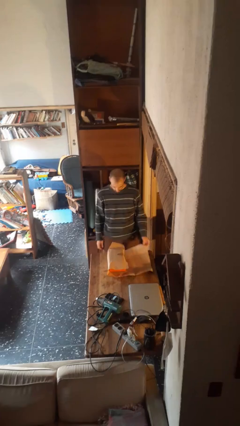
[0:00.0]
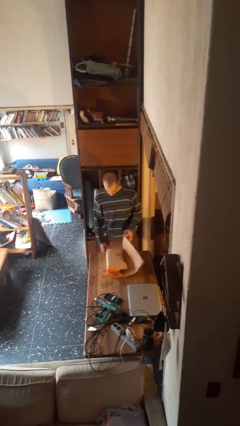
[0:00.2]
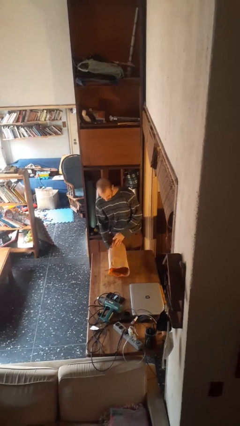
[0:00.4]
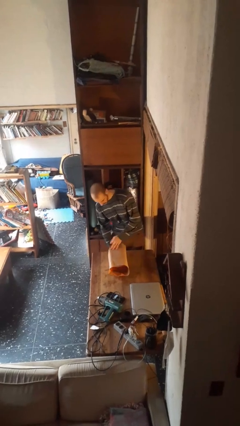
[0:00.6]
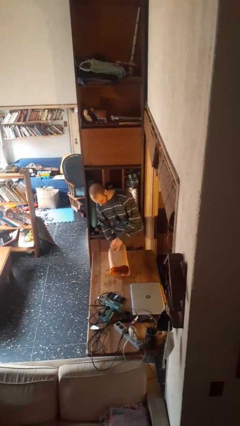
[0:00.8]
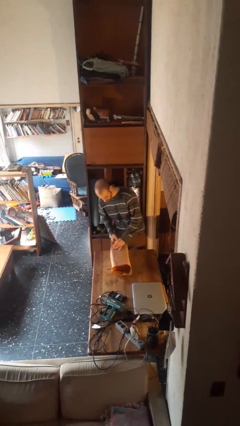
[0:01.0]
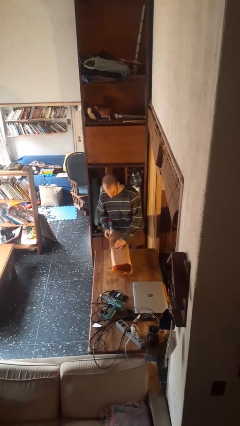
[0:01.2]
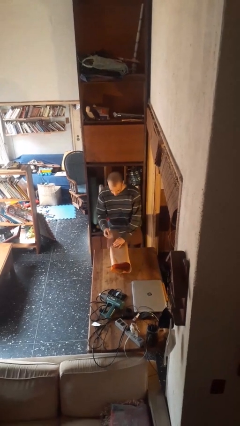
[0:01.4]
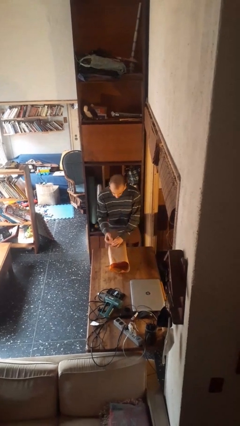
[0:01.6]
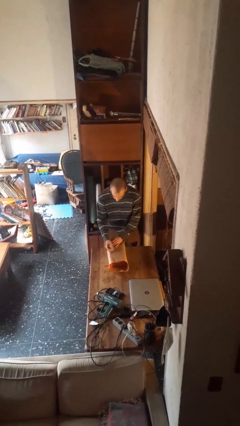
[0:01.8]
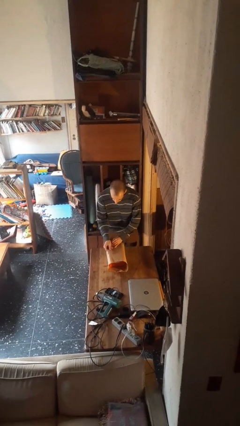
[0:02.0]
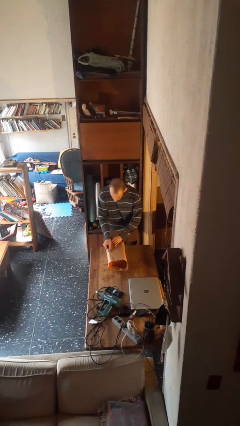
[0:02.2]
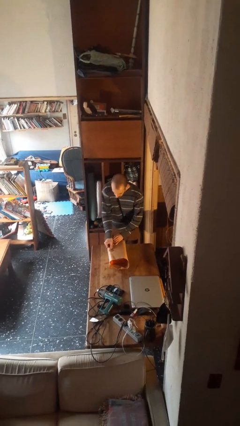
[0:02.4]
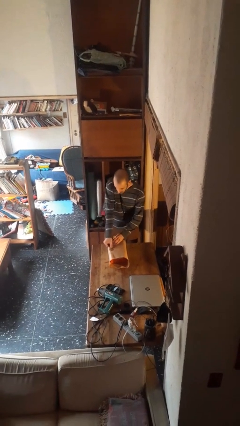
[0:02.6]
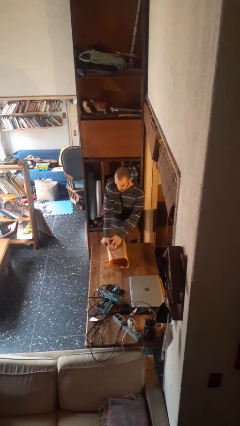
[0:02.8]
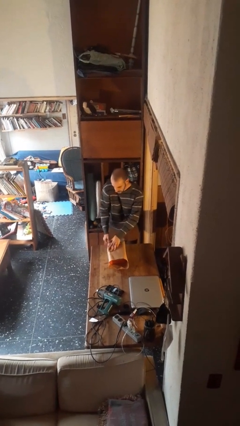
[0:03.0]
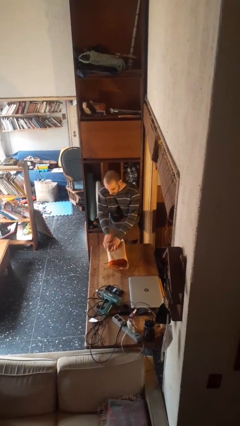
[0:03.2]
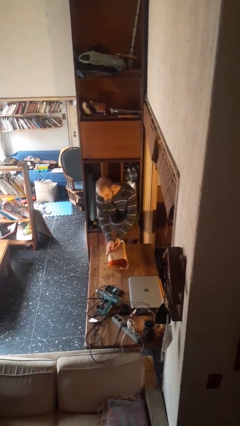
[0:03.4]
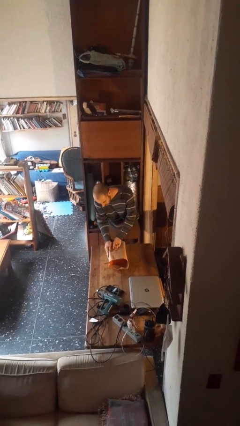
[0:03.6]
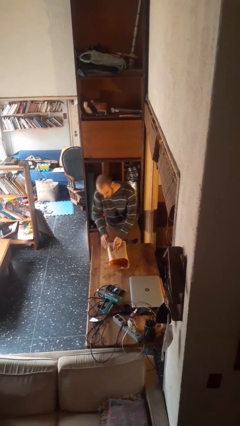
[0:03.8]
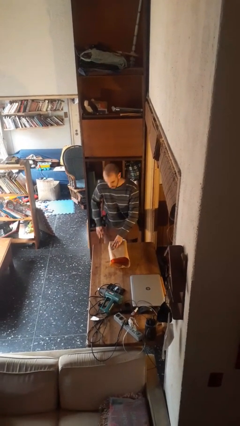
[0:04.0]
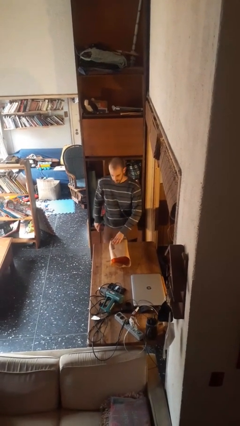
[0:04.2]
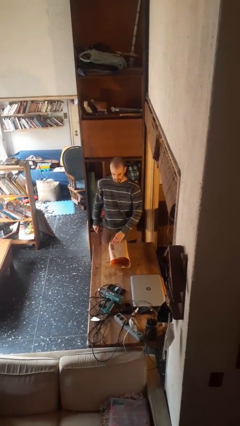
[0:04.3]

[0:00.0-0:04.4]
person wraps box

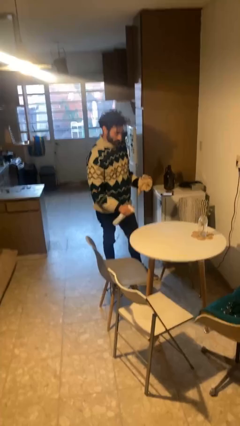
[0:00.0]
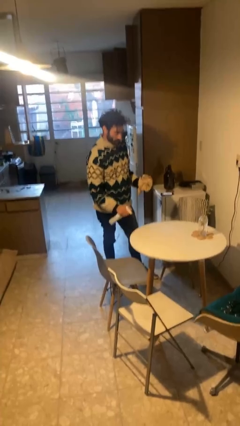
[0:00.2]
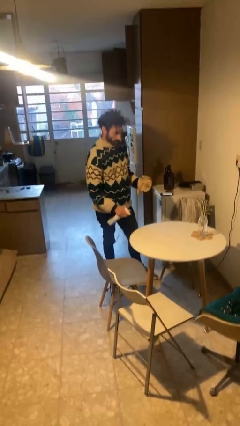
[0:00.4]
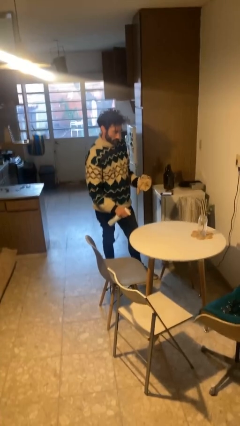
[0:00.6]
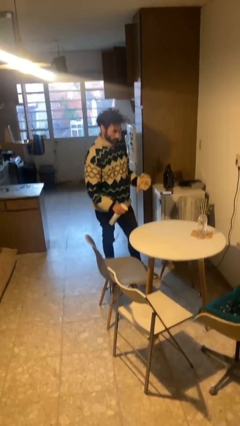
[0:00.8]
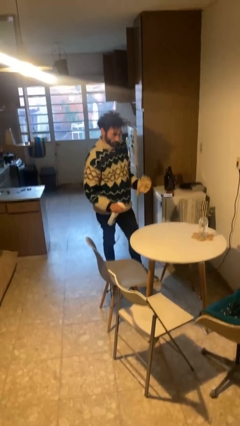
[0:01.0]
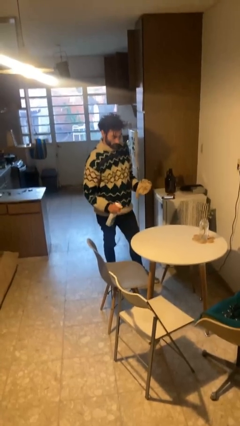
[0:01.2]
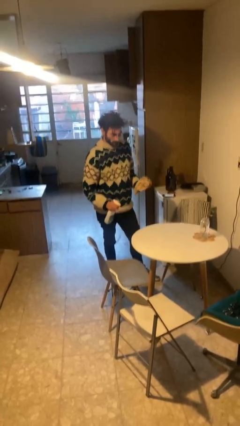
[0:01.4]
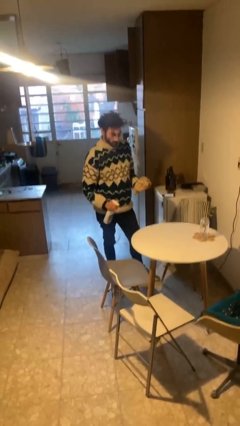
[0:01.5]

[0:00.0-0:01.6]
person sprays from bottle

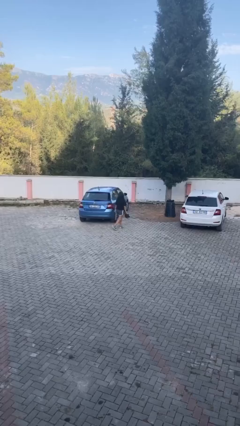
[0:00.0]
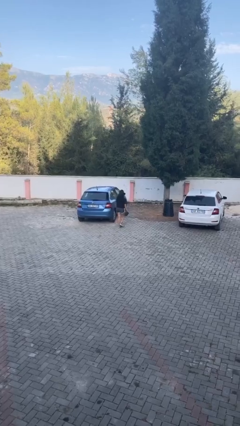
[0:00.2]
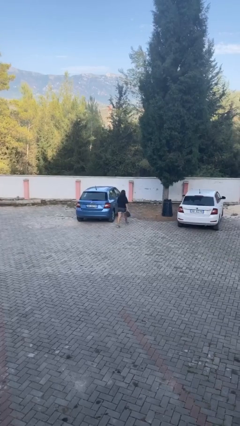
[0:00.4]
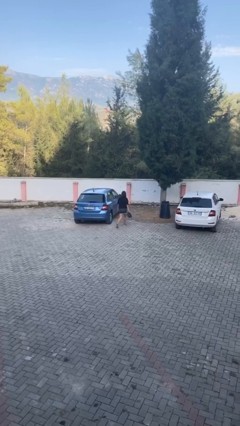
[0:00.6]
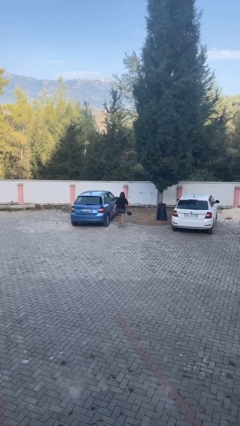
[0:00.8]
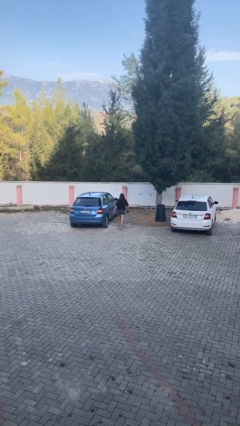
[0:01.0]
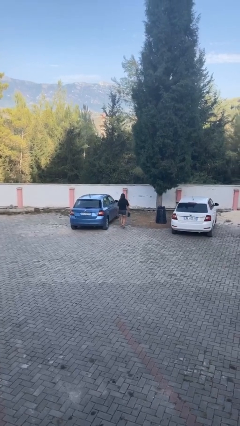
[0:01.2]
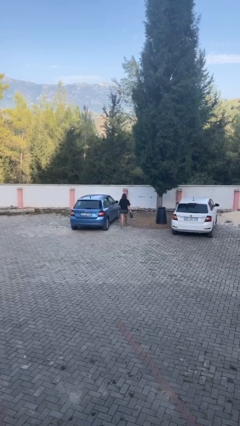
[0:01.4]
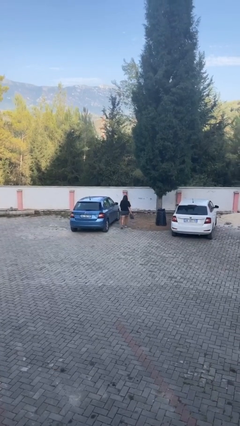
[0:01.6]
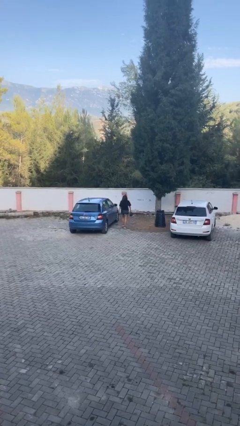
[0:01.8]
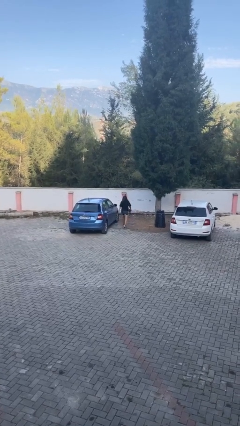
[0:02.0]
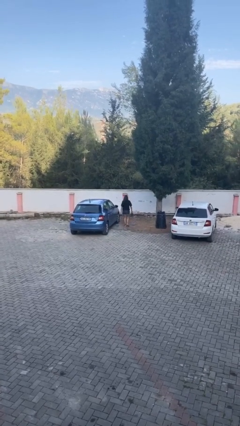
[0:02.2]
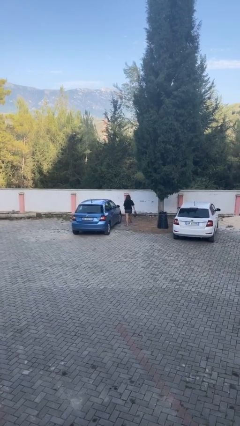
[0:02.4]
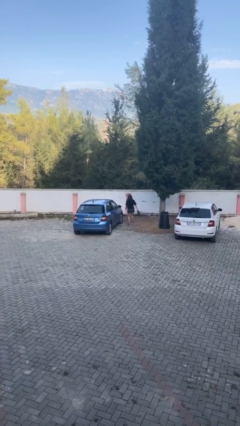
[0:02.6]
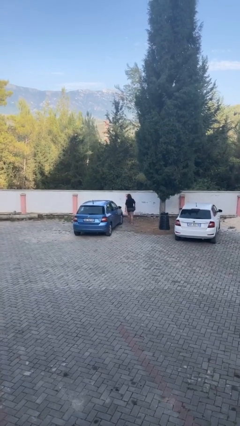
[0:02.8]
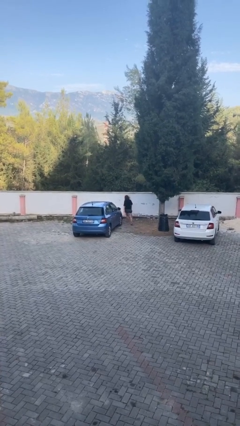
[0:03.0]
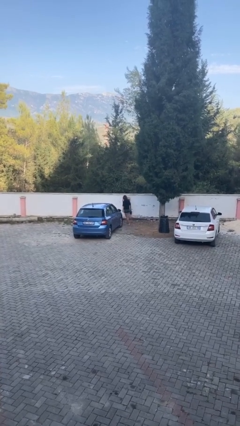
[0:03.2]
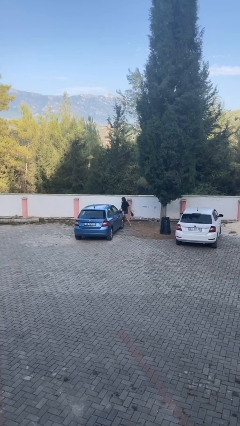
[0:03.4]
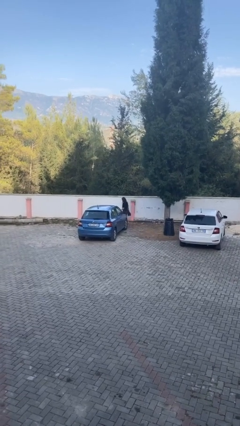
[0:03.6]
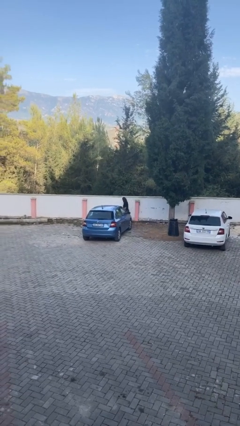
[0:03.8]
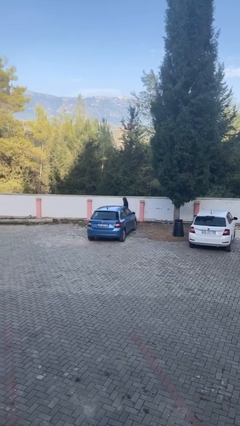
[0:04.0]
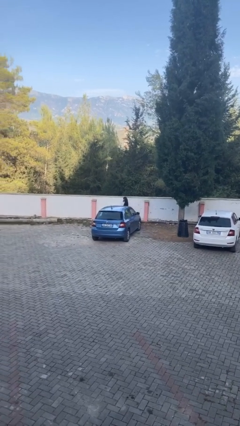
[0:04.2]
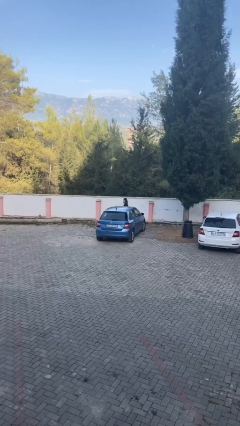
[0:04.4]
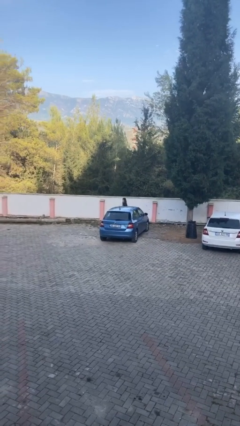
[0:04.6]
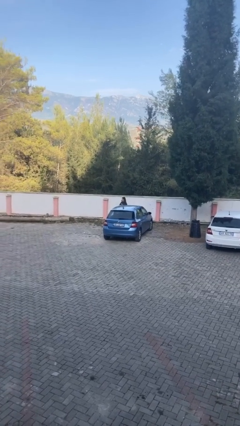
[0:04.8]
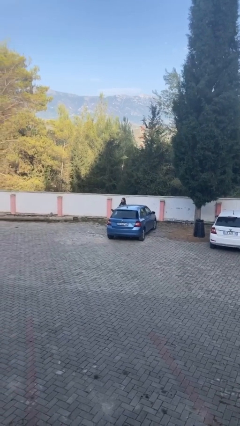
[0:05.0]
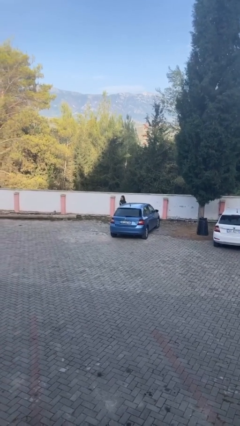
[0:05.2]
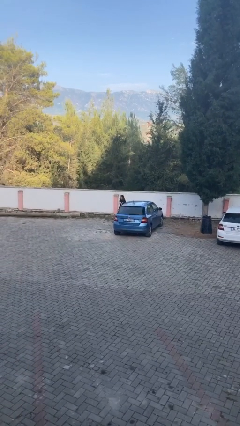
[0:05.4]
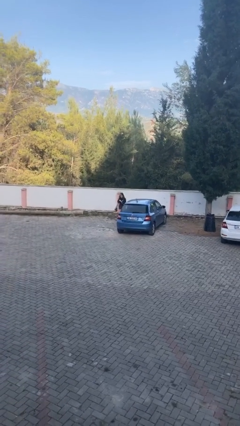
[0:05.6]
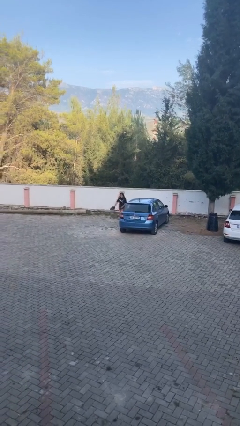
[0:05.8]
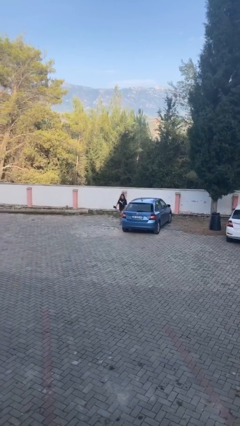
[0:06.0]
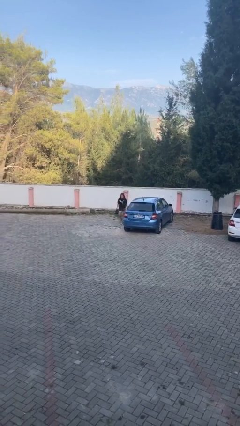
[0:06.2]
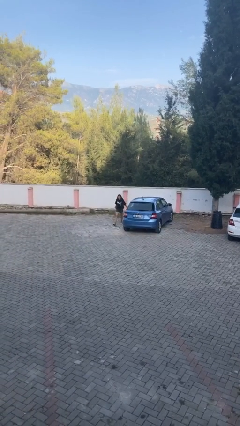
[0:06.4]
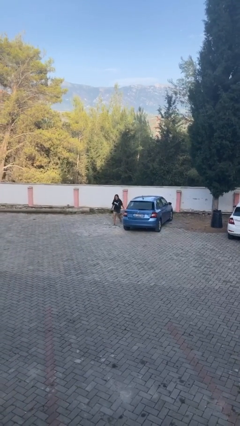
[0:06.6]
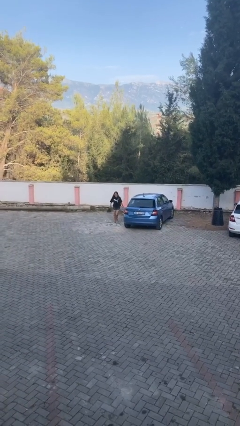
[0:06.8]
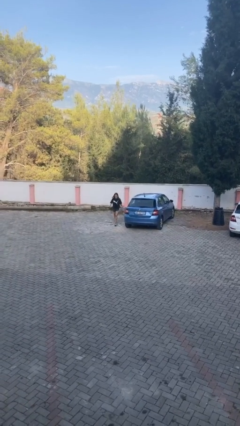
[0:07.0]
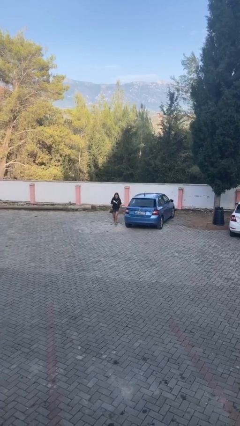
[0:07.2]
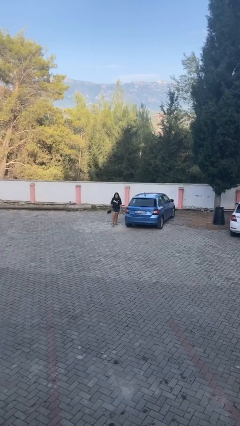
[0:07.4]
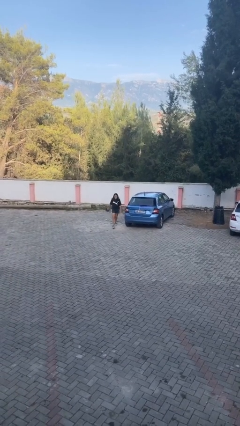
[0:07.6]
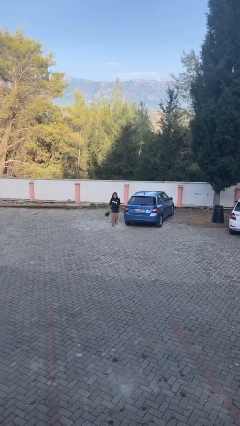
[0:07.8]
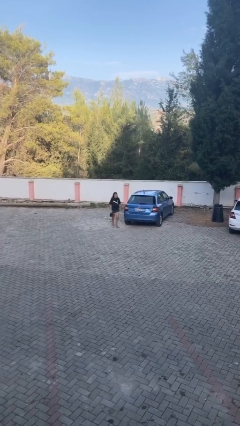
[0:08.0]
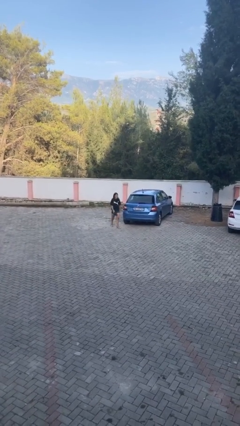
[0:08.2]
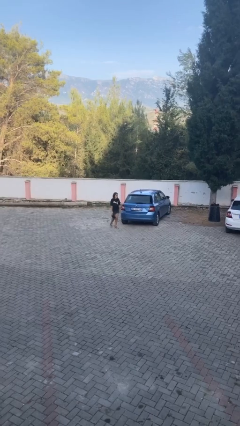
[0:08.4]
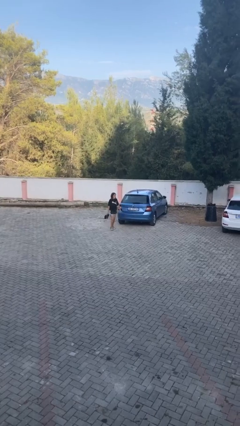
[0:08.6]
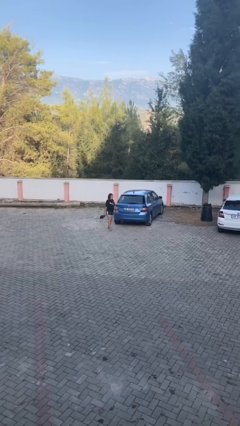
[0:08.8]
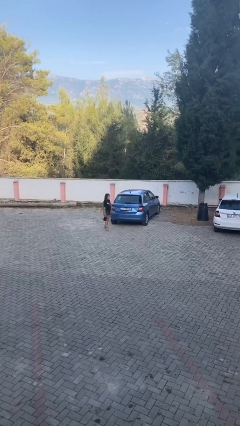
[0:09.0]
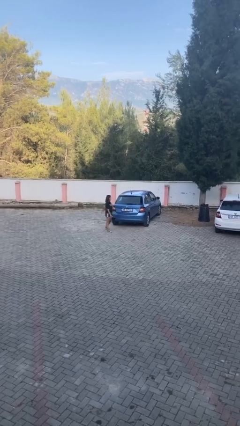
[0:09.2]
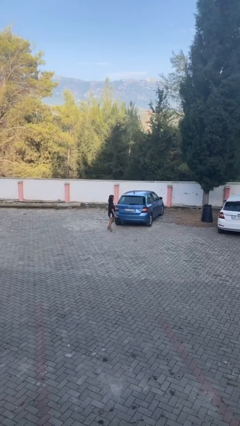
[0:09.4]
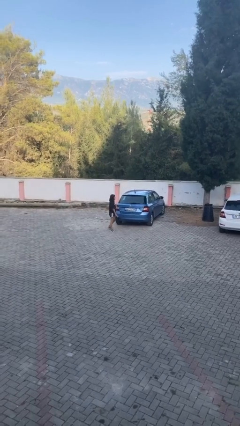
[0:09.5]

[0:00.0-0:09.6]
person walks around car

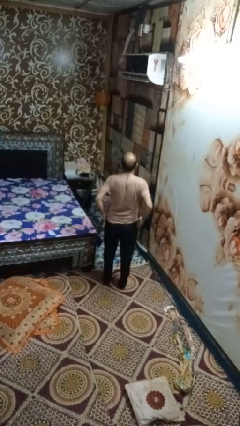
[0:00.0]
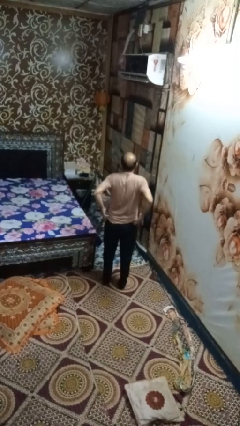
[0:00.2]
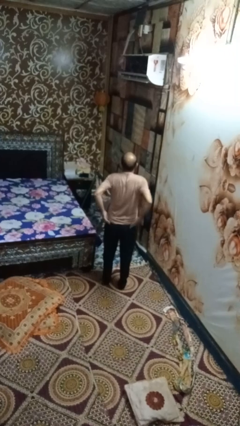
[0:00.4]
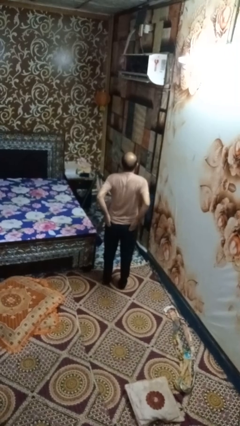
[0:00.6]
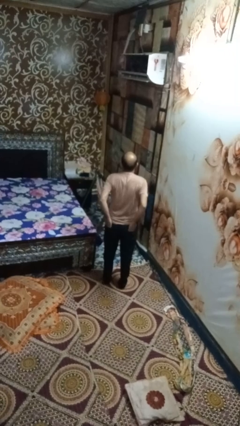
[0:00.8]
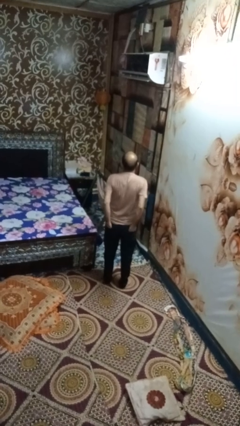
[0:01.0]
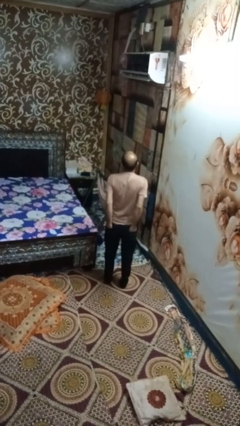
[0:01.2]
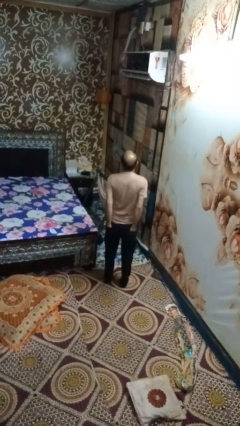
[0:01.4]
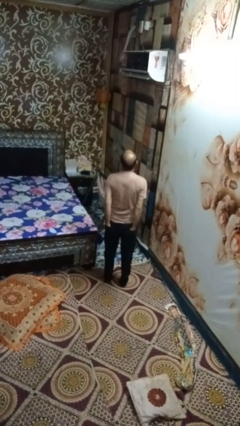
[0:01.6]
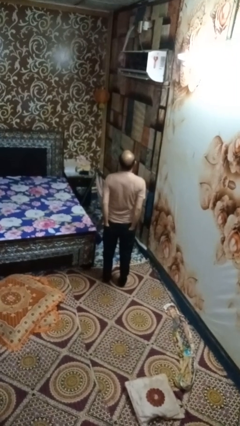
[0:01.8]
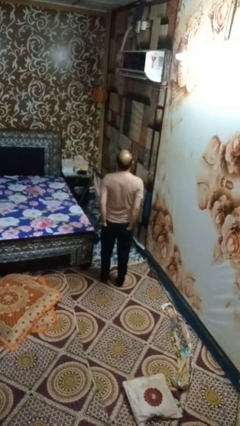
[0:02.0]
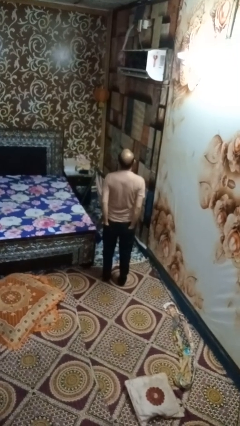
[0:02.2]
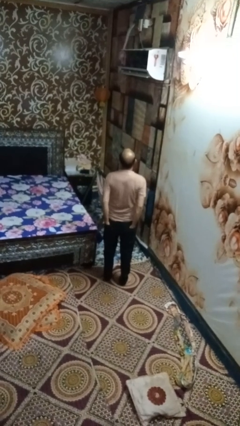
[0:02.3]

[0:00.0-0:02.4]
person puts hands in back pockets

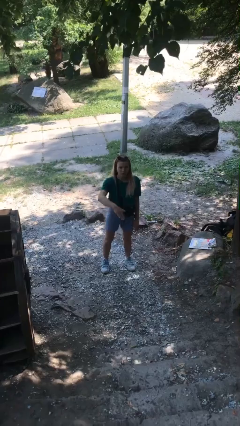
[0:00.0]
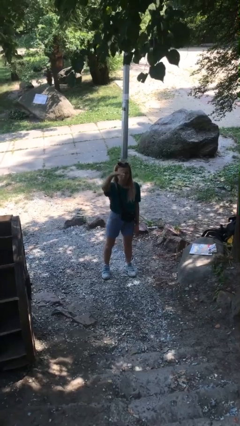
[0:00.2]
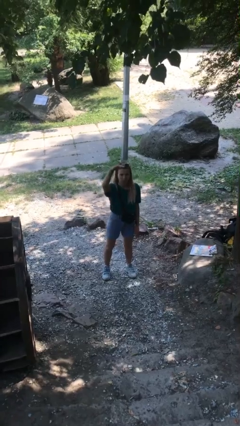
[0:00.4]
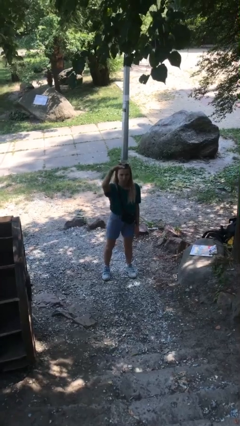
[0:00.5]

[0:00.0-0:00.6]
person gestures swipe up
